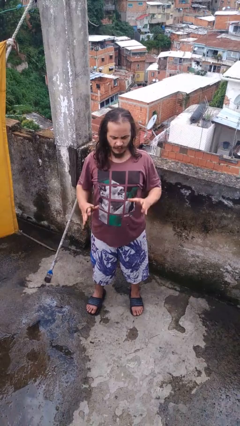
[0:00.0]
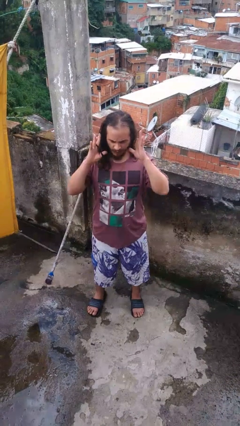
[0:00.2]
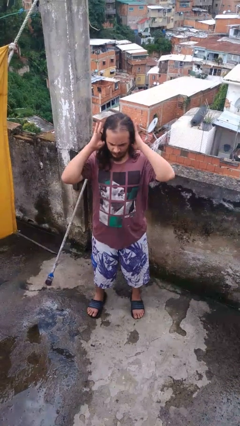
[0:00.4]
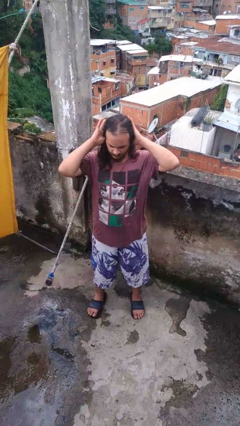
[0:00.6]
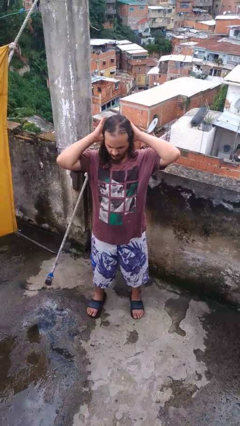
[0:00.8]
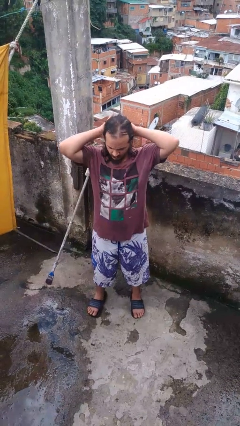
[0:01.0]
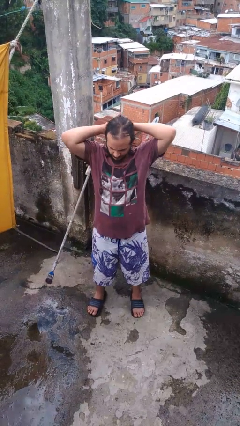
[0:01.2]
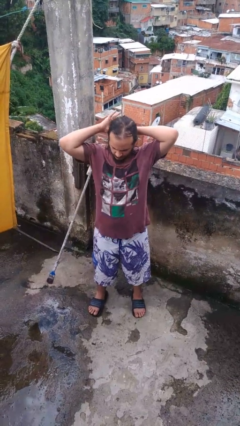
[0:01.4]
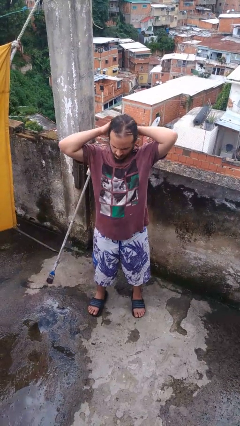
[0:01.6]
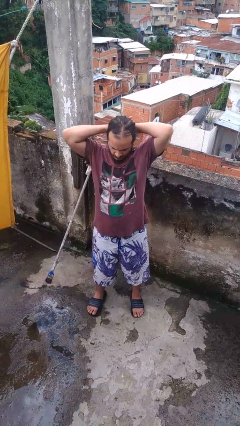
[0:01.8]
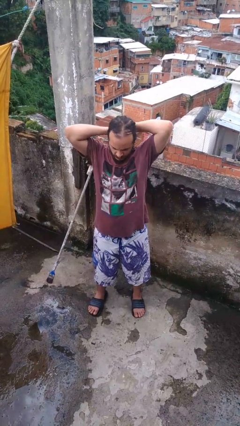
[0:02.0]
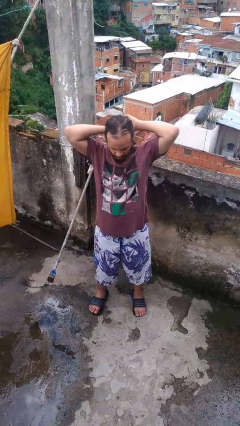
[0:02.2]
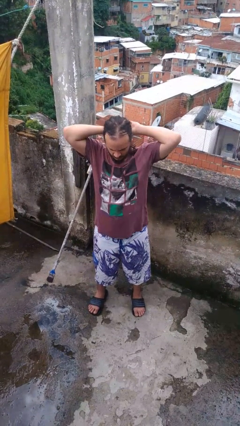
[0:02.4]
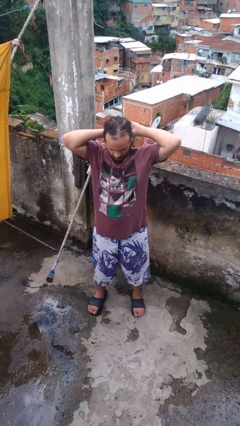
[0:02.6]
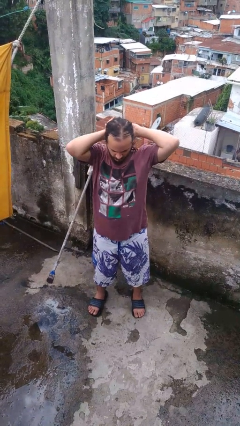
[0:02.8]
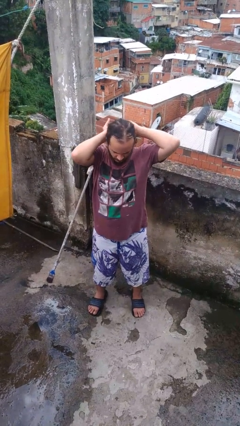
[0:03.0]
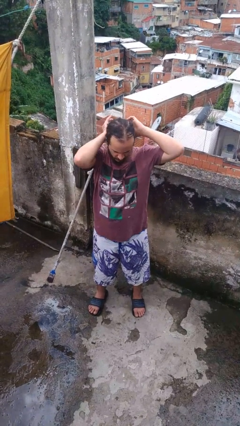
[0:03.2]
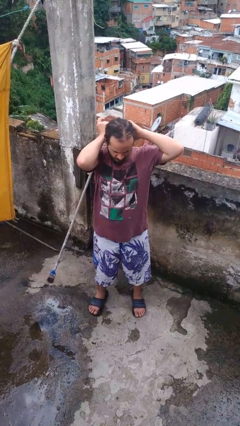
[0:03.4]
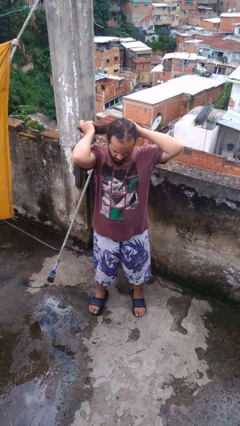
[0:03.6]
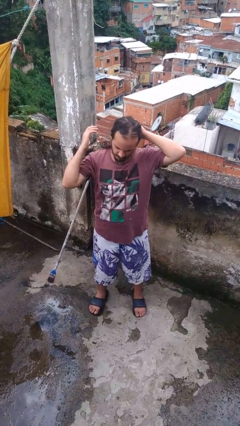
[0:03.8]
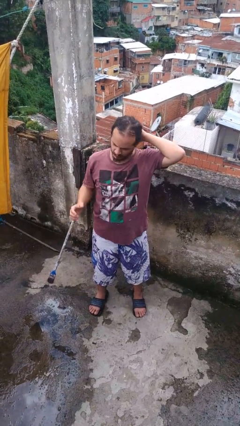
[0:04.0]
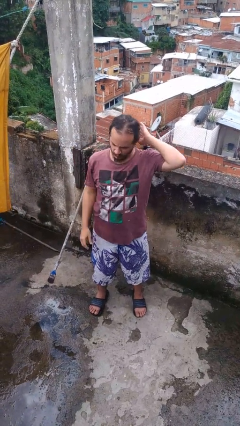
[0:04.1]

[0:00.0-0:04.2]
person puts hair in ponytail

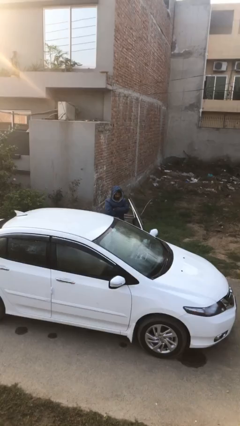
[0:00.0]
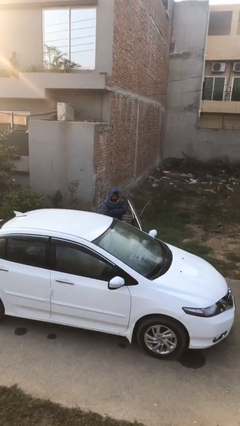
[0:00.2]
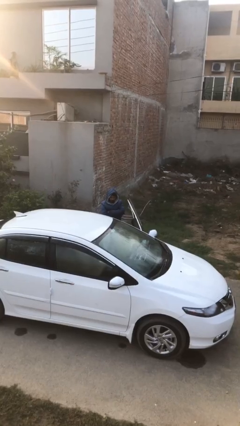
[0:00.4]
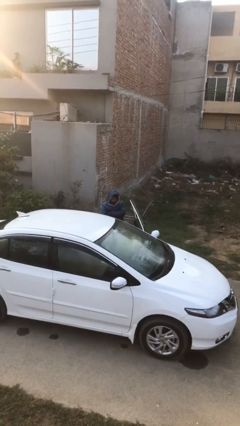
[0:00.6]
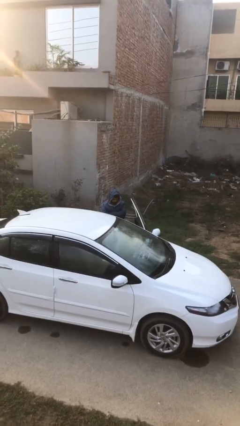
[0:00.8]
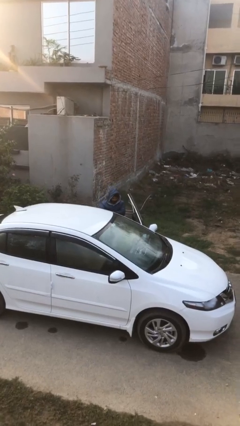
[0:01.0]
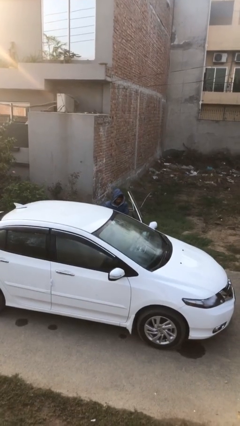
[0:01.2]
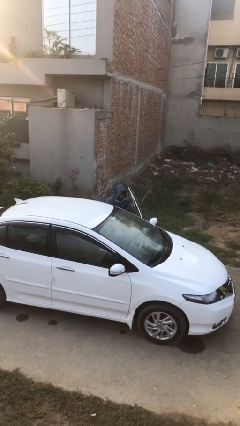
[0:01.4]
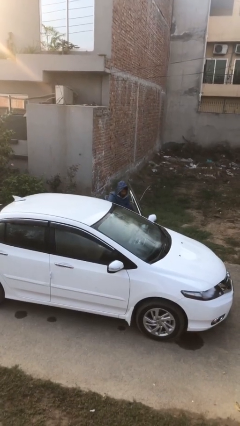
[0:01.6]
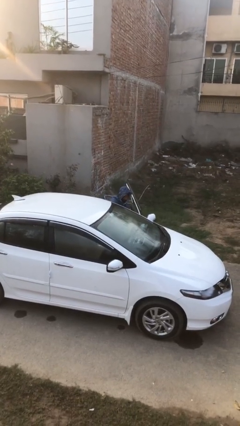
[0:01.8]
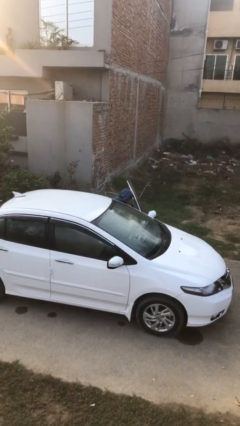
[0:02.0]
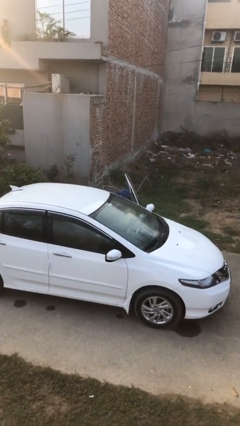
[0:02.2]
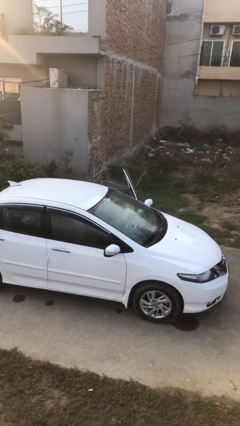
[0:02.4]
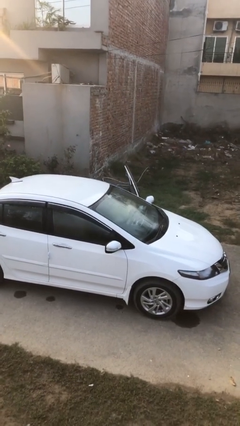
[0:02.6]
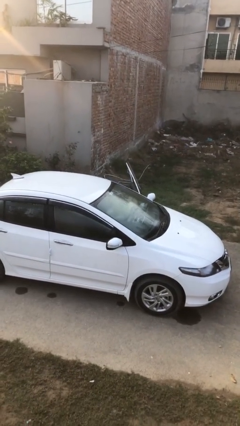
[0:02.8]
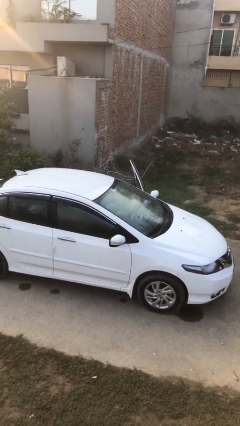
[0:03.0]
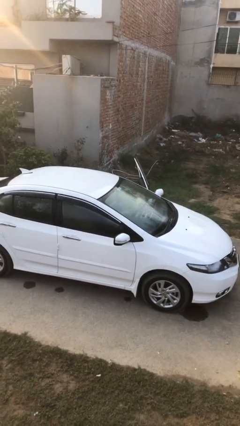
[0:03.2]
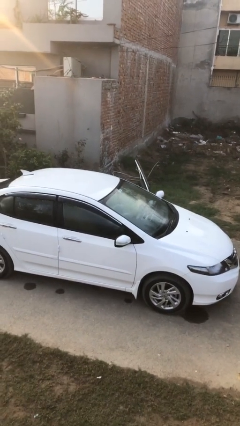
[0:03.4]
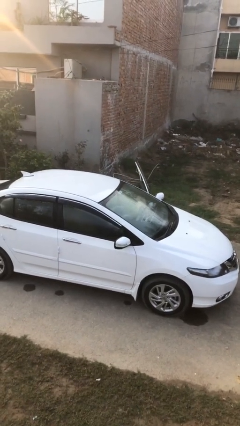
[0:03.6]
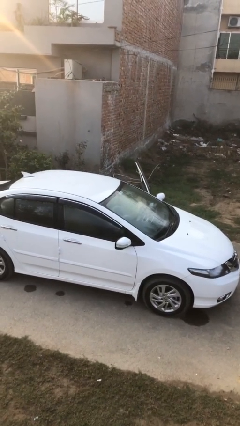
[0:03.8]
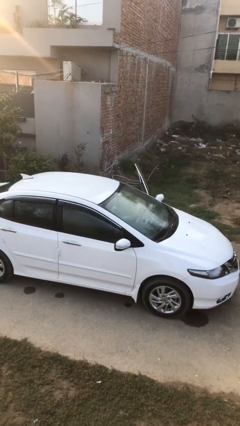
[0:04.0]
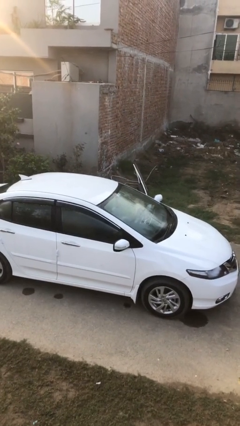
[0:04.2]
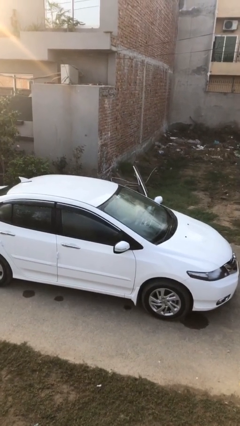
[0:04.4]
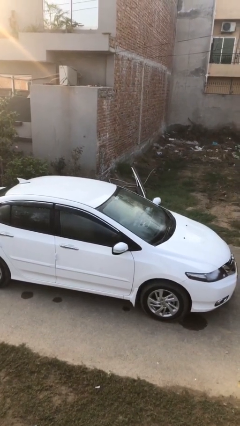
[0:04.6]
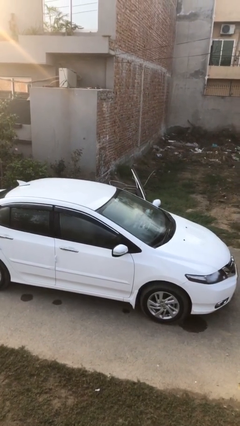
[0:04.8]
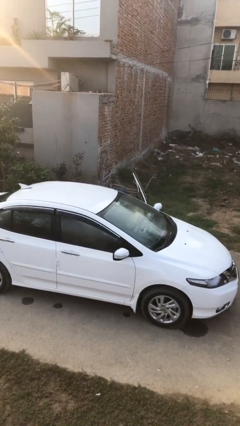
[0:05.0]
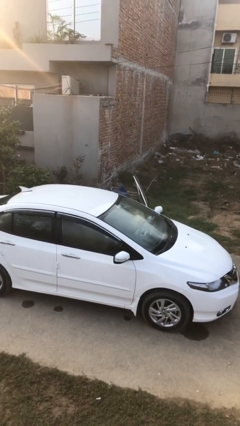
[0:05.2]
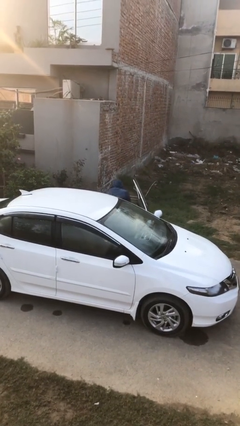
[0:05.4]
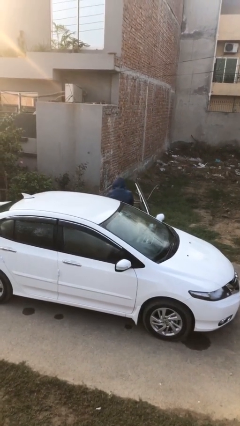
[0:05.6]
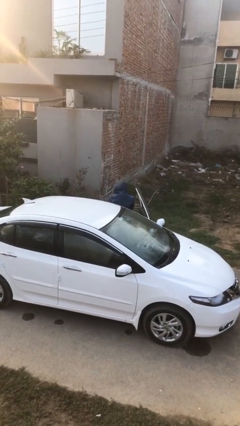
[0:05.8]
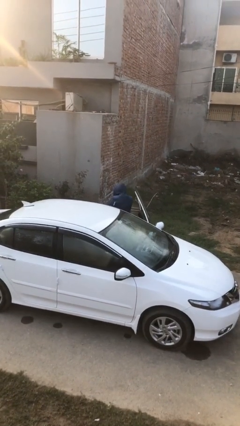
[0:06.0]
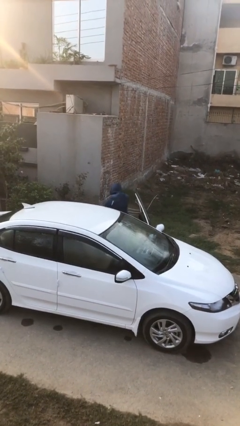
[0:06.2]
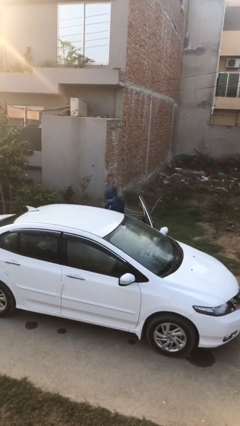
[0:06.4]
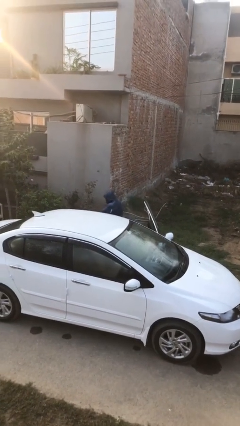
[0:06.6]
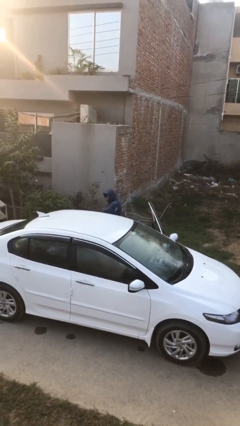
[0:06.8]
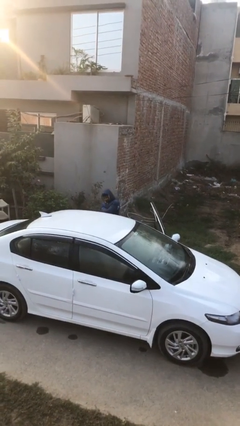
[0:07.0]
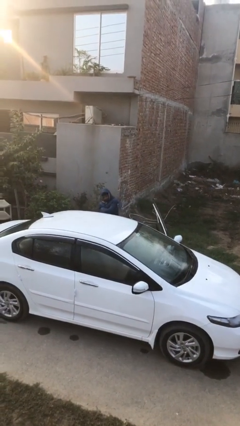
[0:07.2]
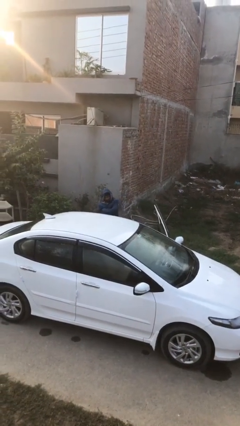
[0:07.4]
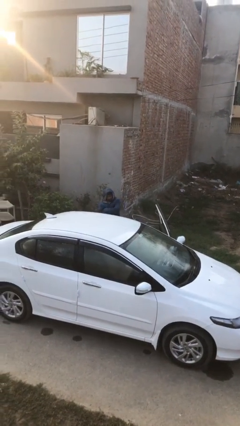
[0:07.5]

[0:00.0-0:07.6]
person enters car

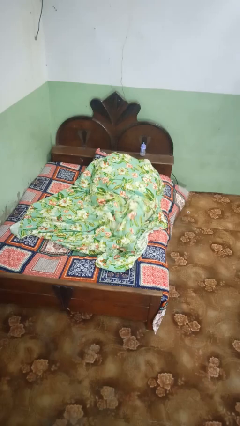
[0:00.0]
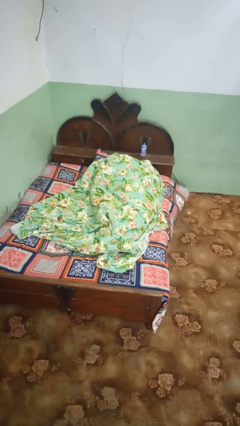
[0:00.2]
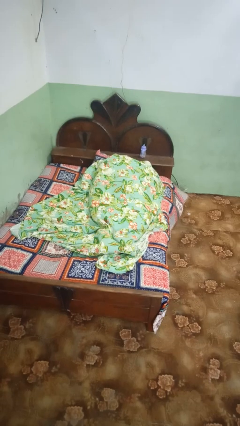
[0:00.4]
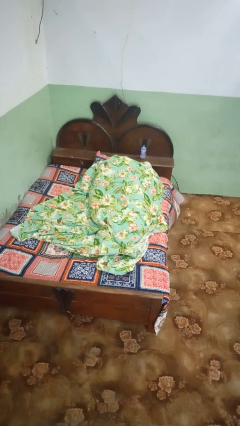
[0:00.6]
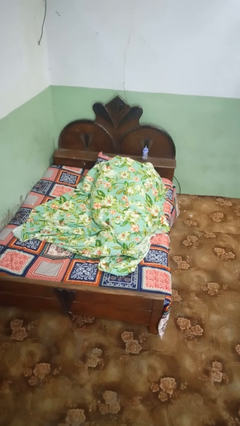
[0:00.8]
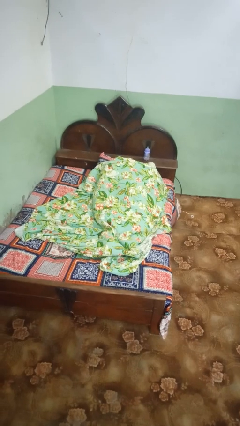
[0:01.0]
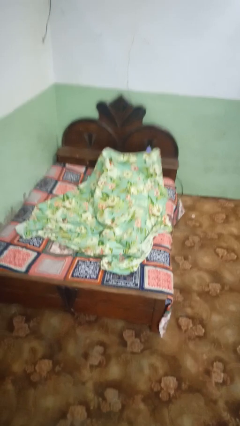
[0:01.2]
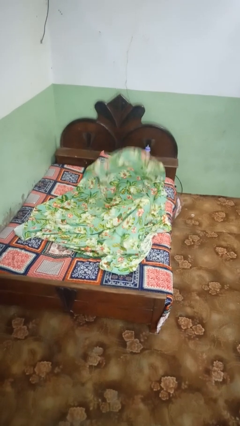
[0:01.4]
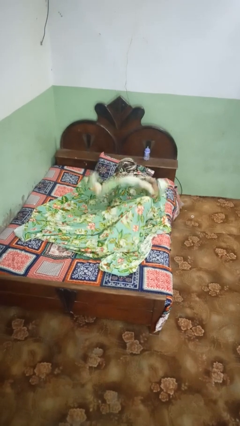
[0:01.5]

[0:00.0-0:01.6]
person covers with bedsheets

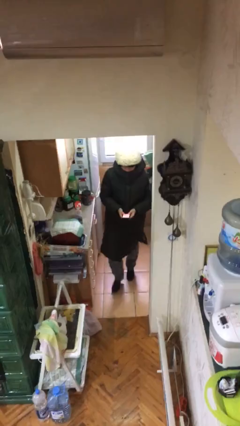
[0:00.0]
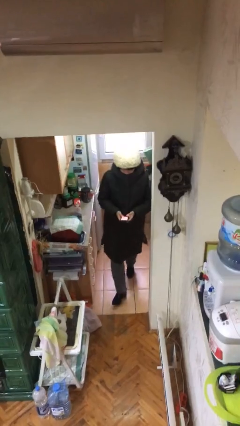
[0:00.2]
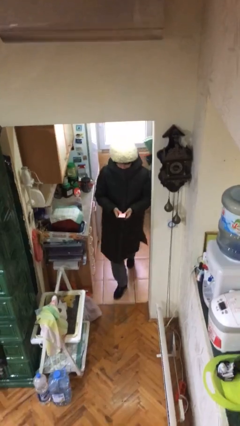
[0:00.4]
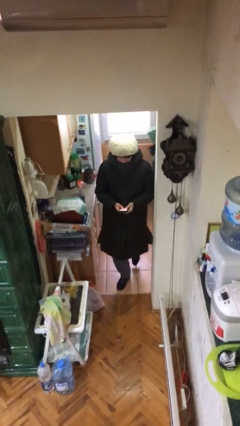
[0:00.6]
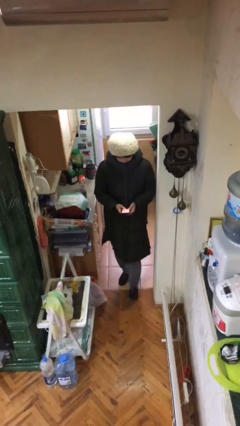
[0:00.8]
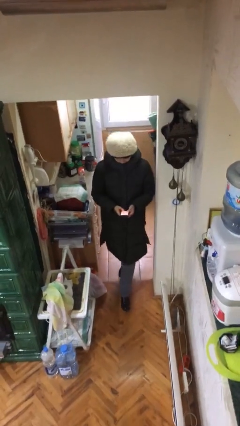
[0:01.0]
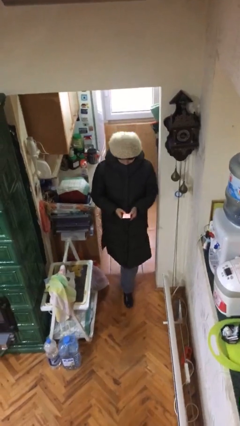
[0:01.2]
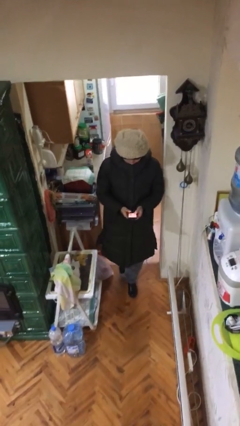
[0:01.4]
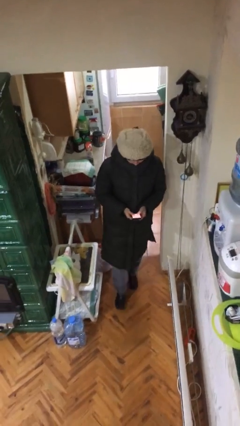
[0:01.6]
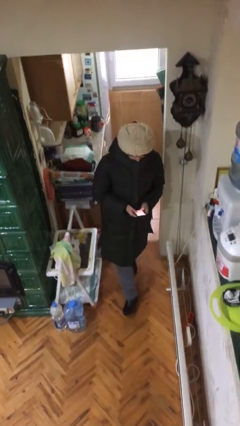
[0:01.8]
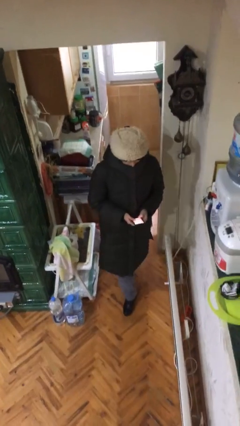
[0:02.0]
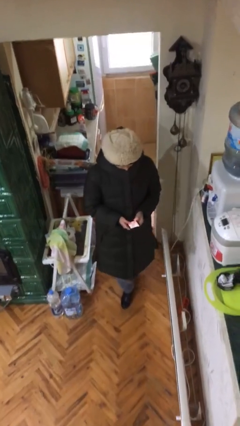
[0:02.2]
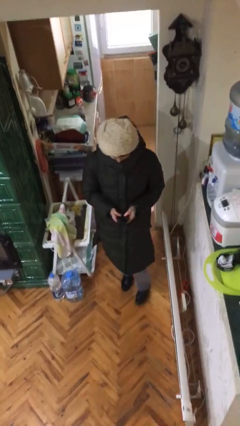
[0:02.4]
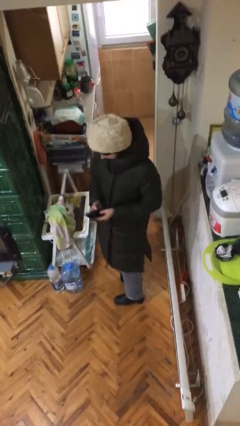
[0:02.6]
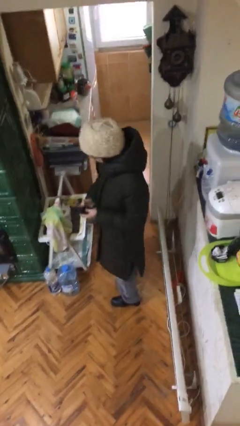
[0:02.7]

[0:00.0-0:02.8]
person enters scene through structure

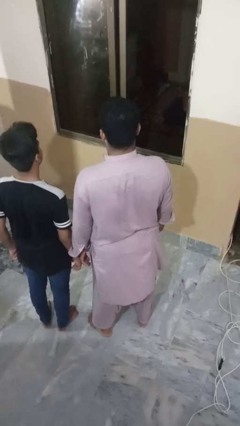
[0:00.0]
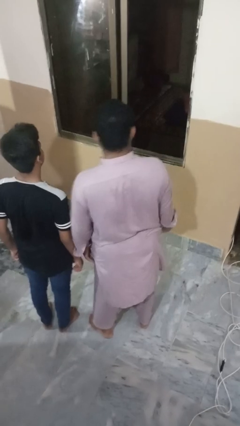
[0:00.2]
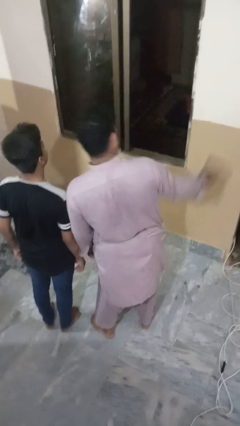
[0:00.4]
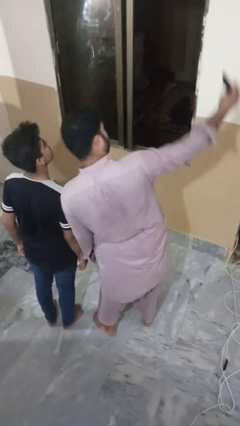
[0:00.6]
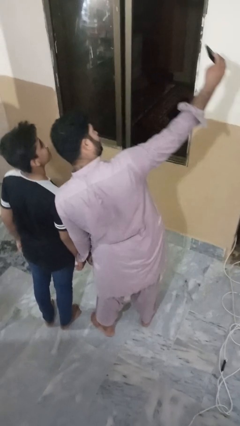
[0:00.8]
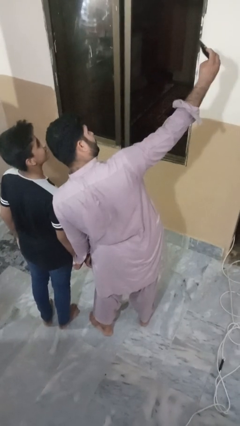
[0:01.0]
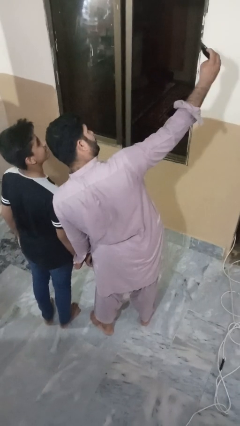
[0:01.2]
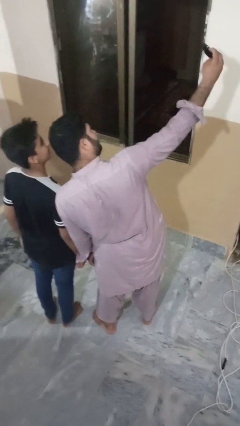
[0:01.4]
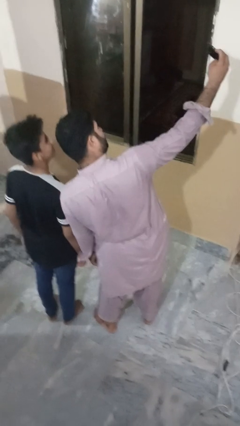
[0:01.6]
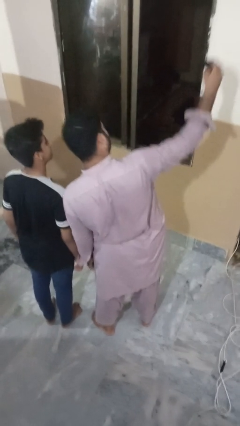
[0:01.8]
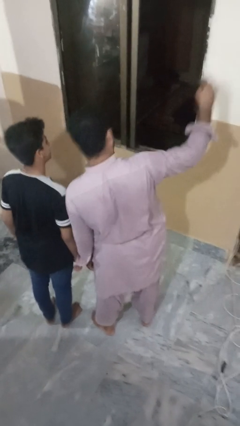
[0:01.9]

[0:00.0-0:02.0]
person takes selfie with person
